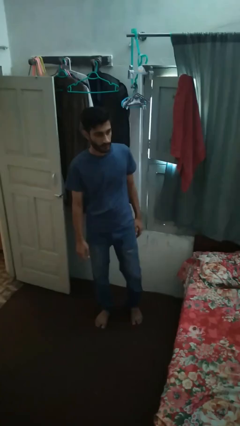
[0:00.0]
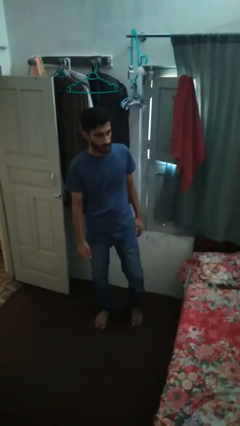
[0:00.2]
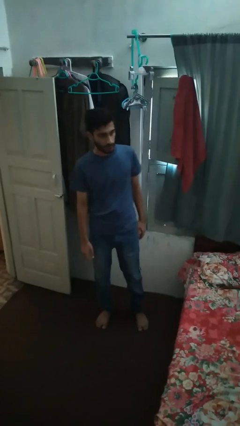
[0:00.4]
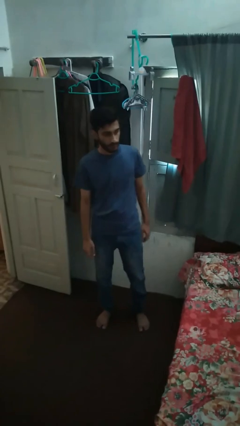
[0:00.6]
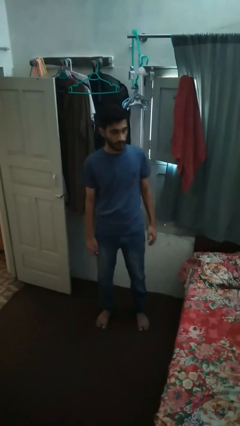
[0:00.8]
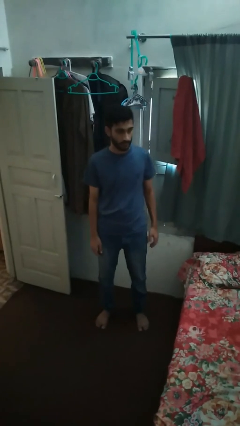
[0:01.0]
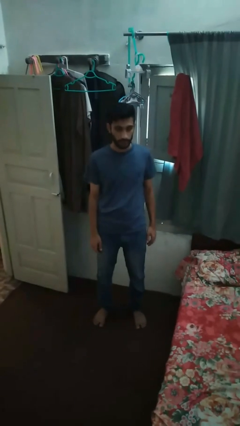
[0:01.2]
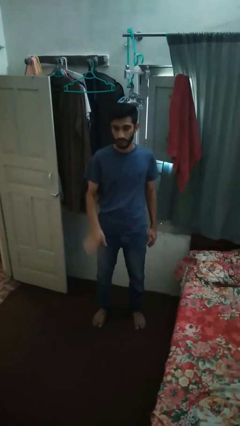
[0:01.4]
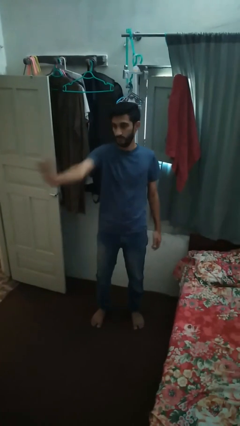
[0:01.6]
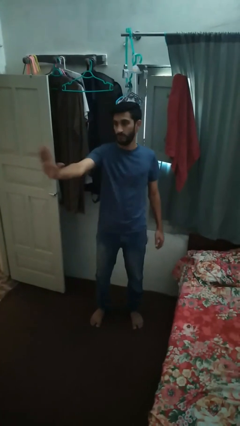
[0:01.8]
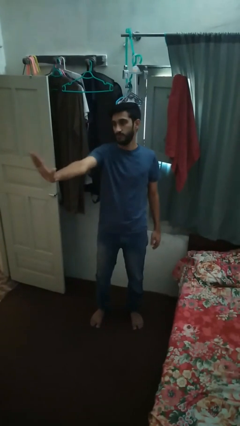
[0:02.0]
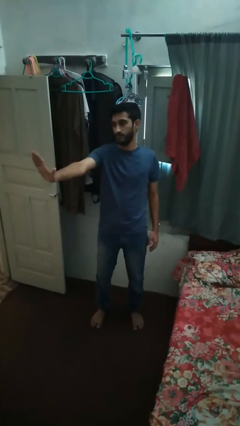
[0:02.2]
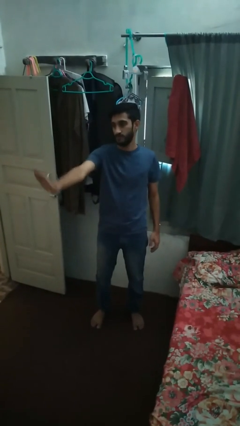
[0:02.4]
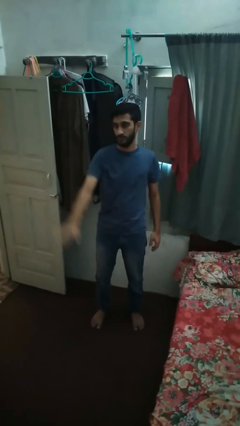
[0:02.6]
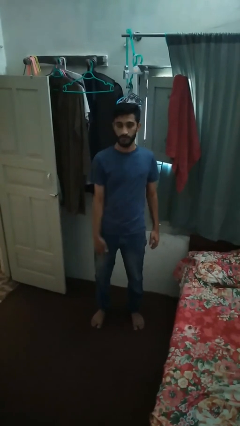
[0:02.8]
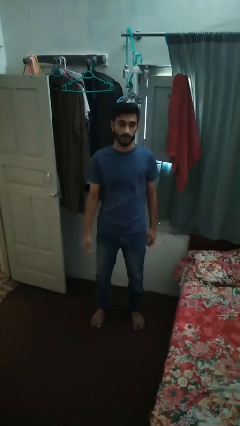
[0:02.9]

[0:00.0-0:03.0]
person gestures stop

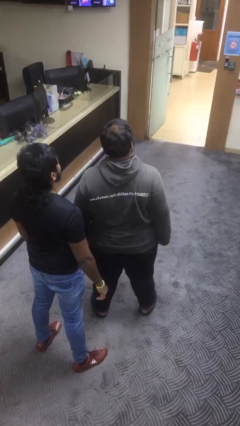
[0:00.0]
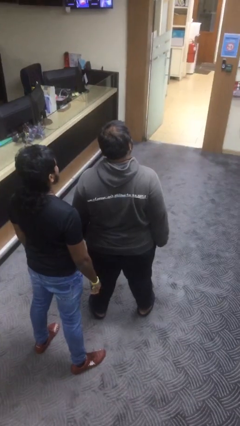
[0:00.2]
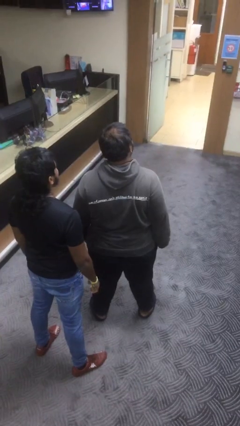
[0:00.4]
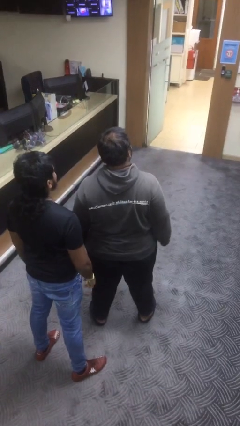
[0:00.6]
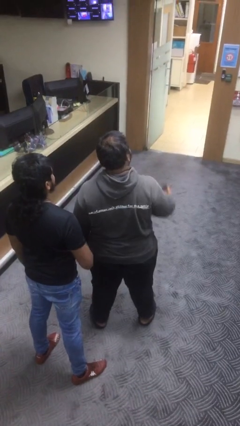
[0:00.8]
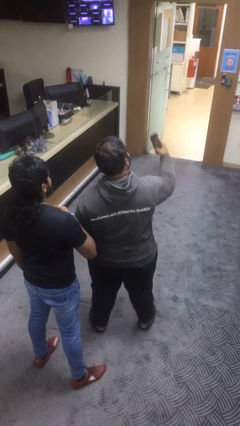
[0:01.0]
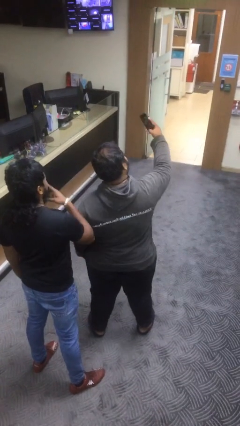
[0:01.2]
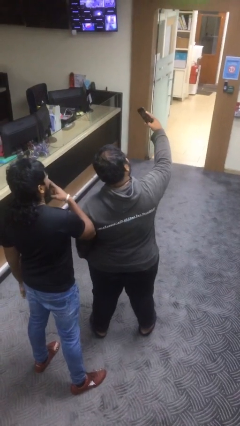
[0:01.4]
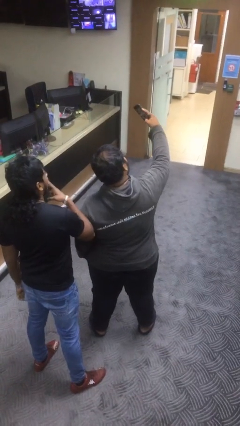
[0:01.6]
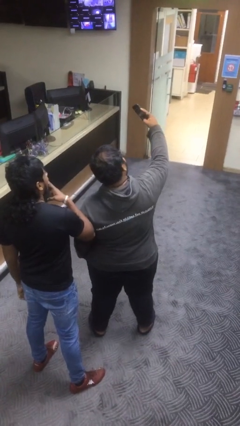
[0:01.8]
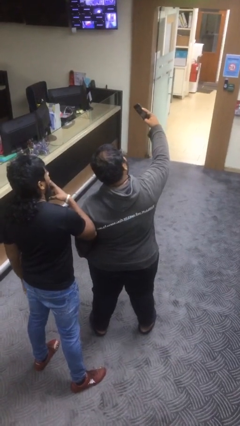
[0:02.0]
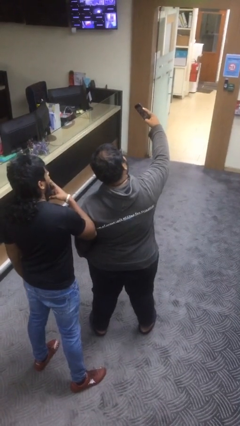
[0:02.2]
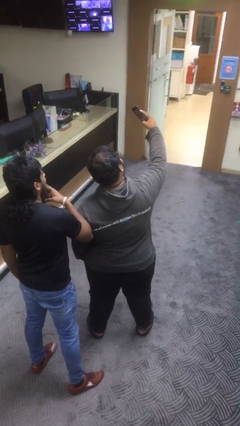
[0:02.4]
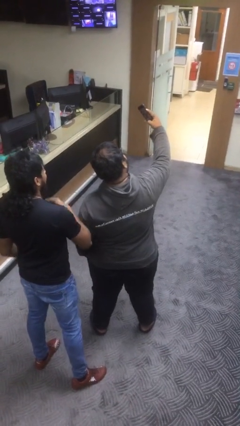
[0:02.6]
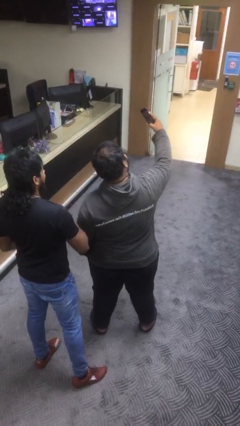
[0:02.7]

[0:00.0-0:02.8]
person takes selfie with person

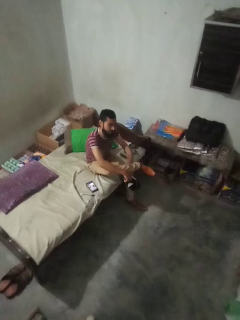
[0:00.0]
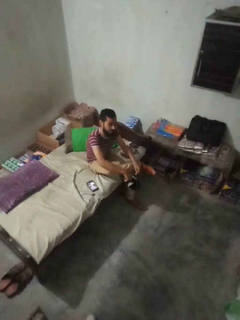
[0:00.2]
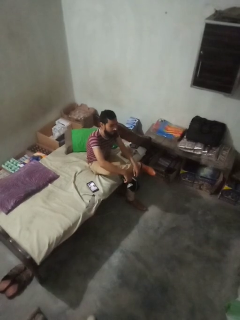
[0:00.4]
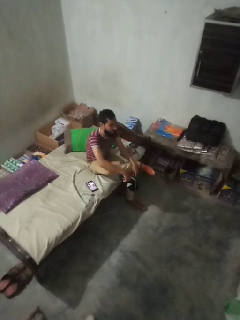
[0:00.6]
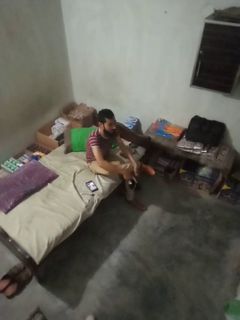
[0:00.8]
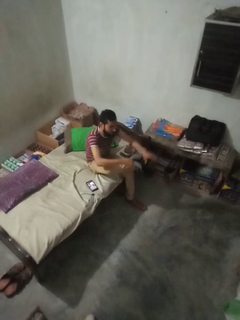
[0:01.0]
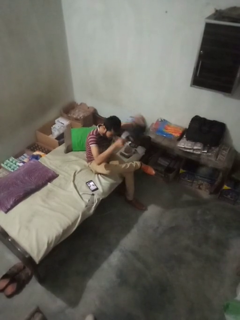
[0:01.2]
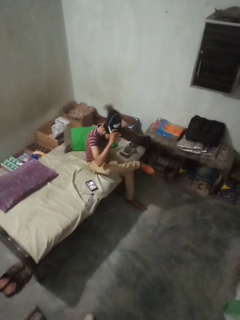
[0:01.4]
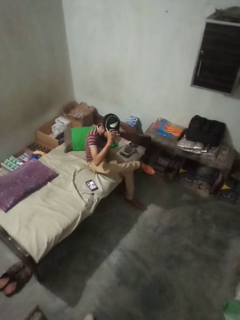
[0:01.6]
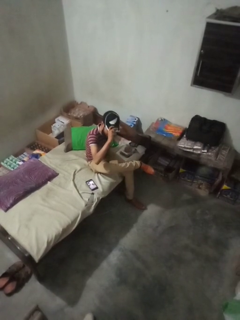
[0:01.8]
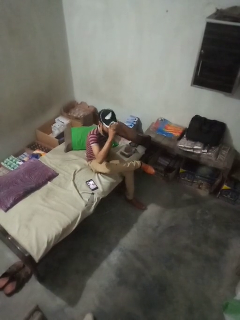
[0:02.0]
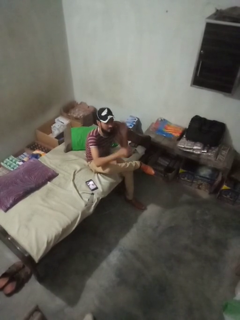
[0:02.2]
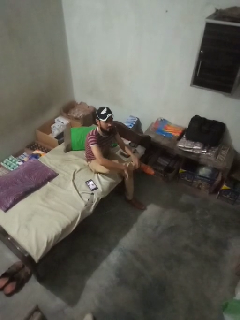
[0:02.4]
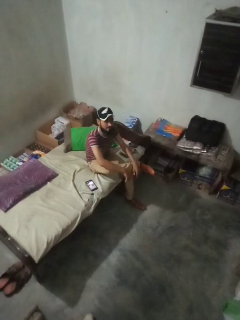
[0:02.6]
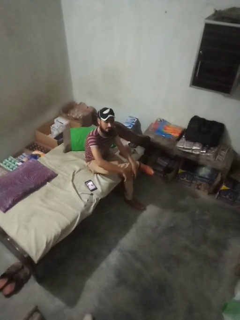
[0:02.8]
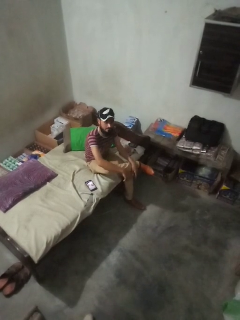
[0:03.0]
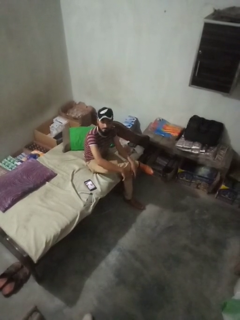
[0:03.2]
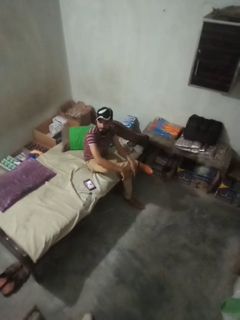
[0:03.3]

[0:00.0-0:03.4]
person puts on hat

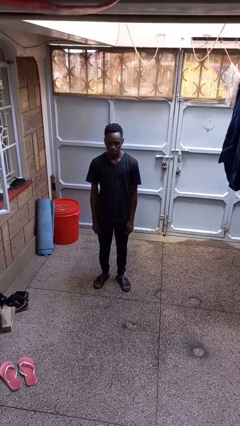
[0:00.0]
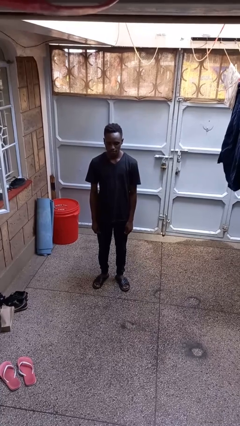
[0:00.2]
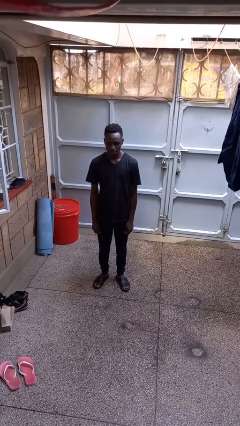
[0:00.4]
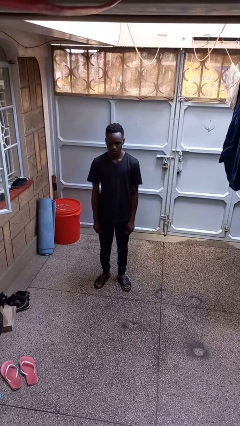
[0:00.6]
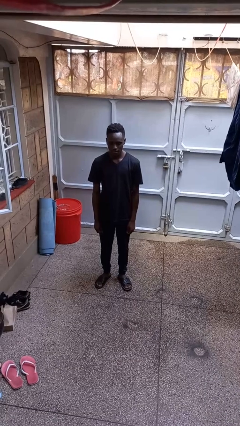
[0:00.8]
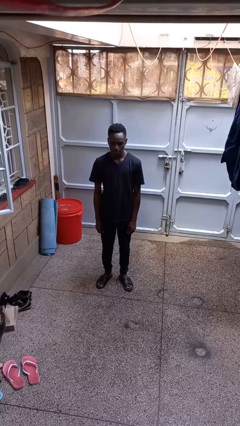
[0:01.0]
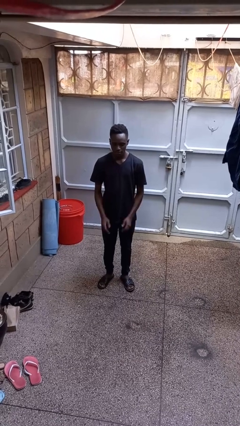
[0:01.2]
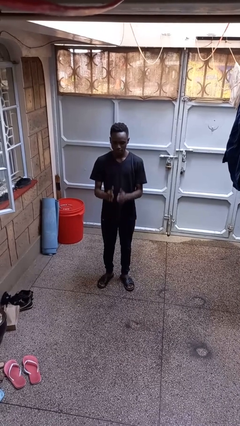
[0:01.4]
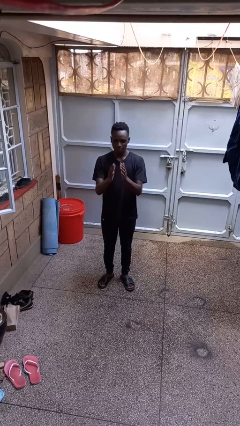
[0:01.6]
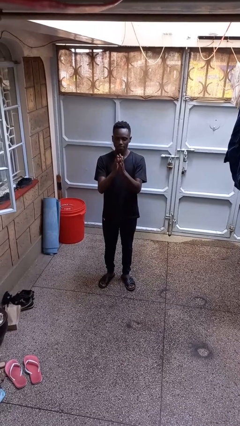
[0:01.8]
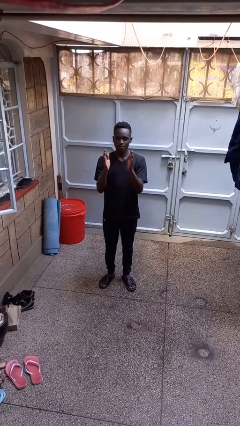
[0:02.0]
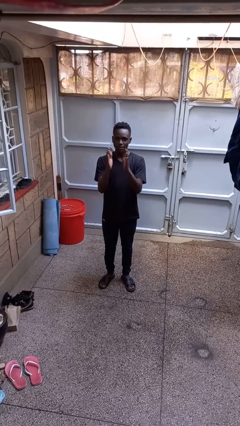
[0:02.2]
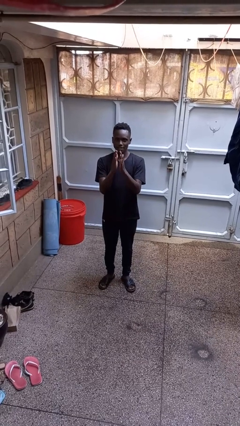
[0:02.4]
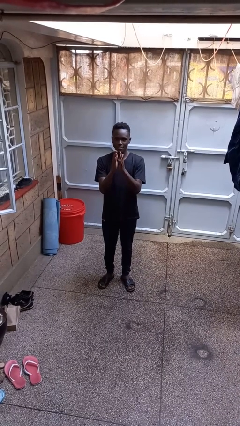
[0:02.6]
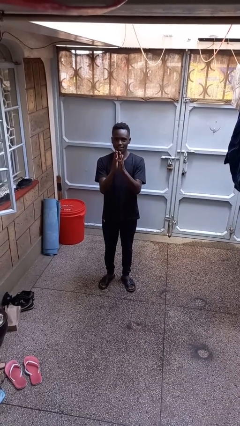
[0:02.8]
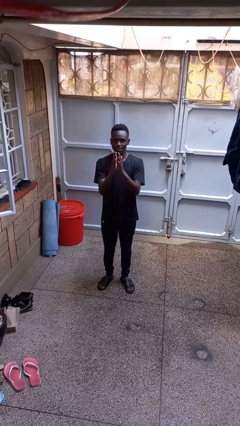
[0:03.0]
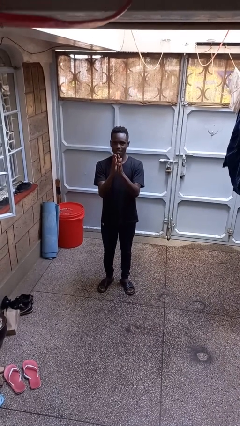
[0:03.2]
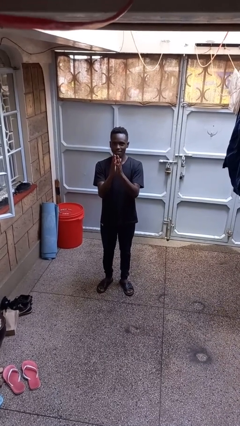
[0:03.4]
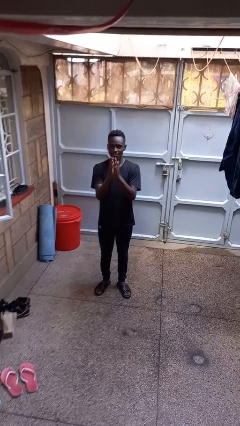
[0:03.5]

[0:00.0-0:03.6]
person gestures zoom in

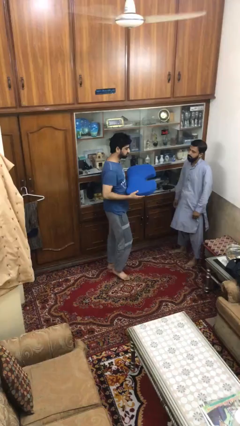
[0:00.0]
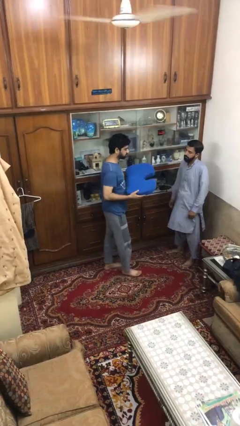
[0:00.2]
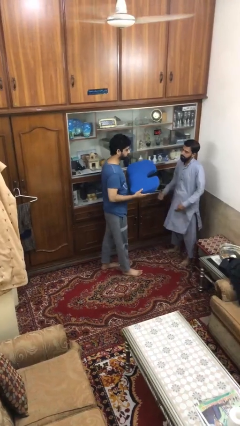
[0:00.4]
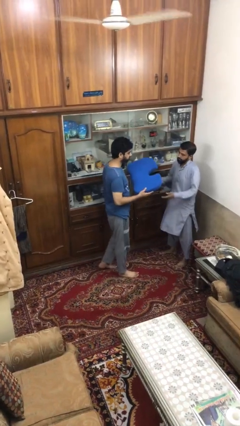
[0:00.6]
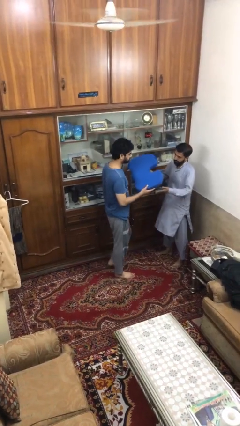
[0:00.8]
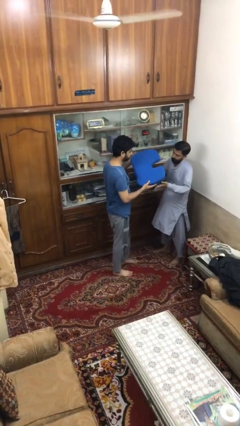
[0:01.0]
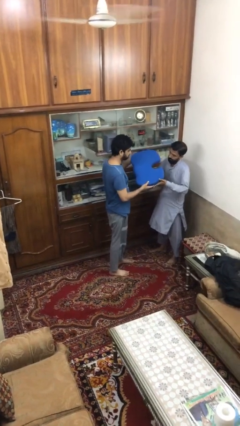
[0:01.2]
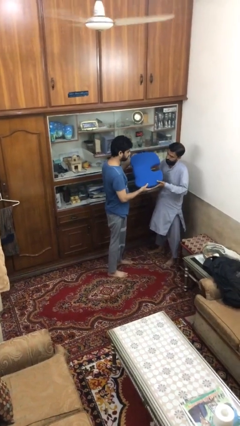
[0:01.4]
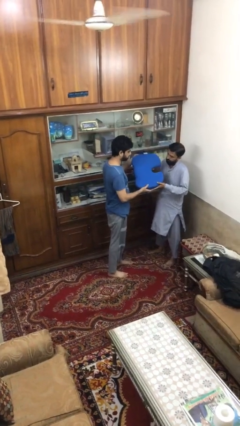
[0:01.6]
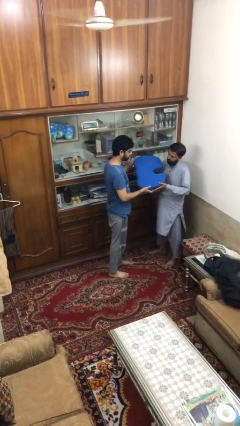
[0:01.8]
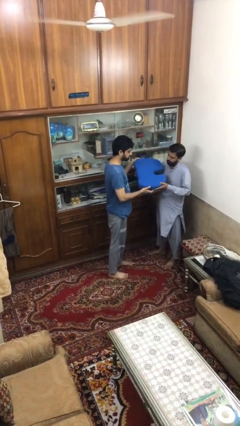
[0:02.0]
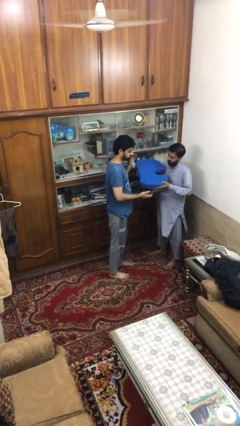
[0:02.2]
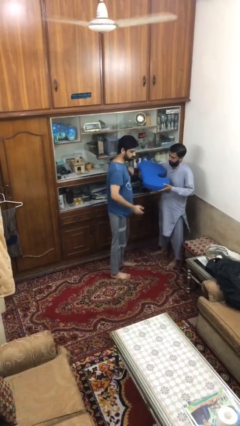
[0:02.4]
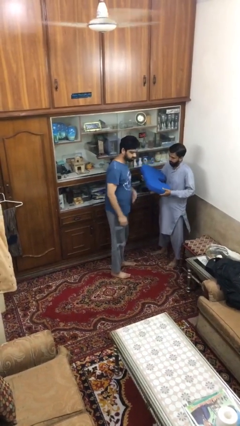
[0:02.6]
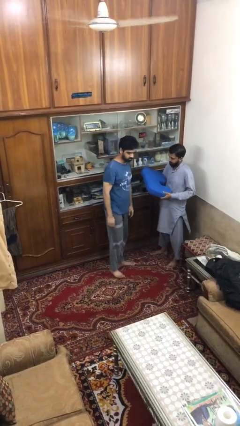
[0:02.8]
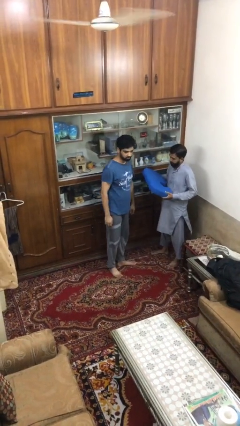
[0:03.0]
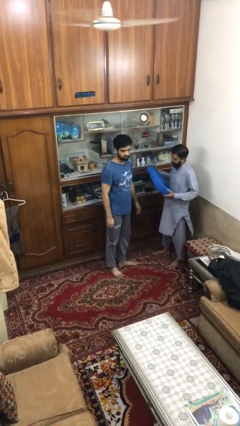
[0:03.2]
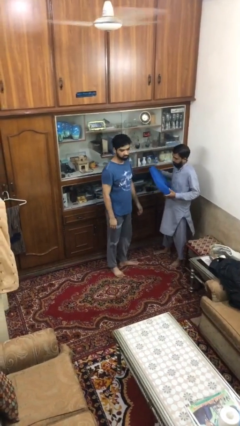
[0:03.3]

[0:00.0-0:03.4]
person transfers object to person

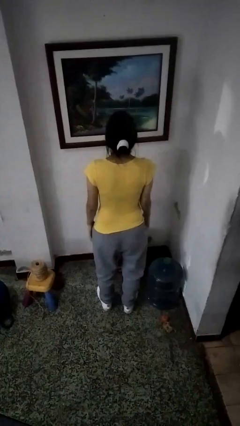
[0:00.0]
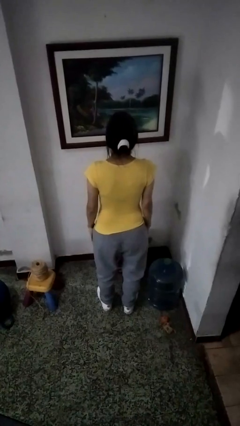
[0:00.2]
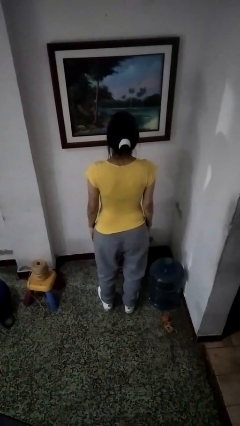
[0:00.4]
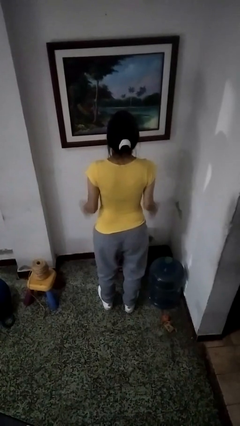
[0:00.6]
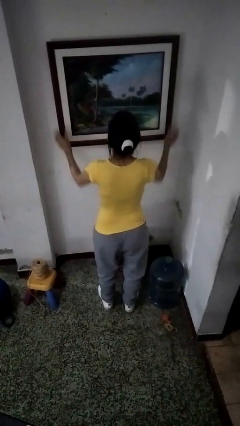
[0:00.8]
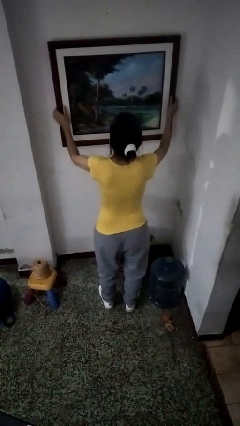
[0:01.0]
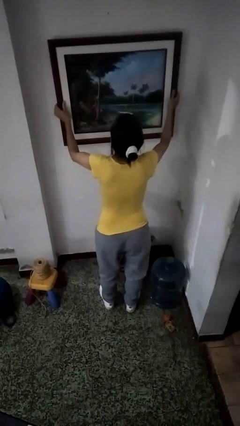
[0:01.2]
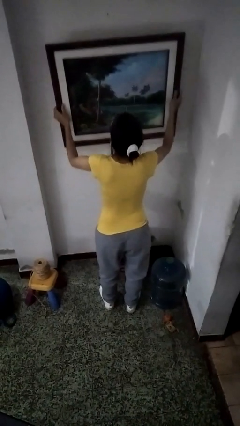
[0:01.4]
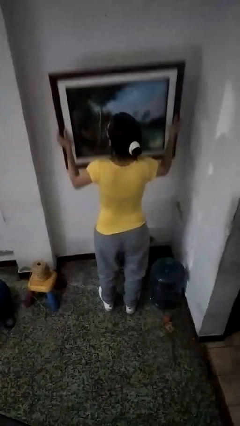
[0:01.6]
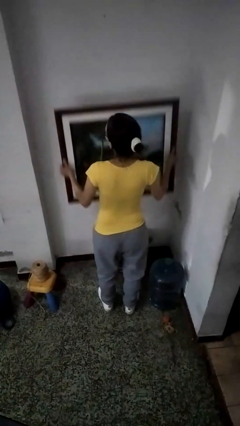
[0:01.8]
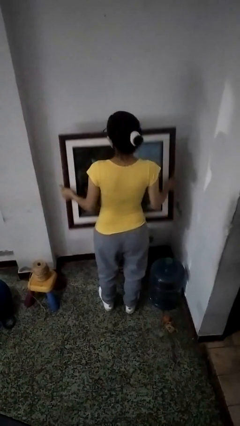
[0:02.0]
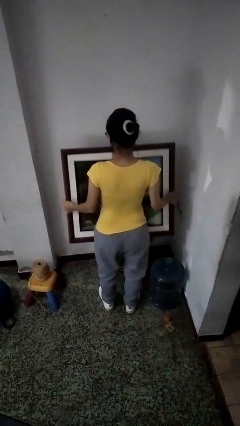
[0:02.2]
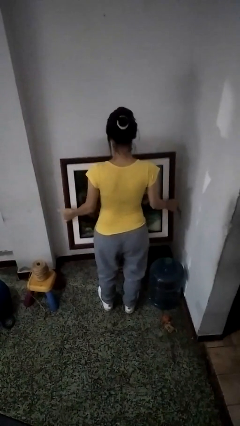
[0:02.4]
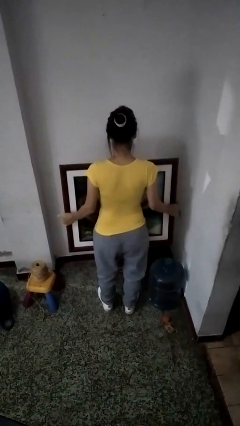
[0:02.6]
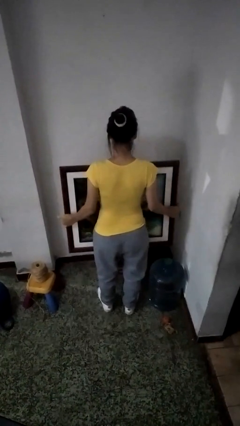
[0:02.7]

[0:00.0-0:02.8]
person takes down picture frame
